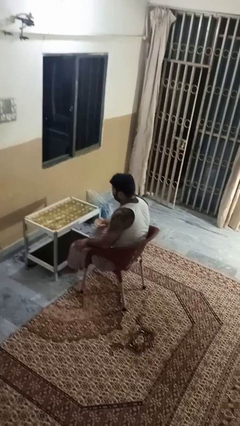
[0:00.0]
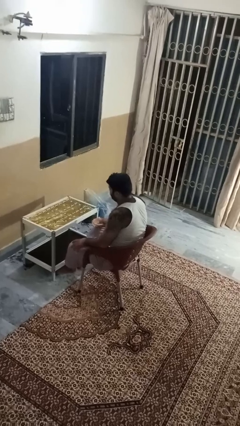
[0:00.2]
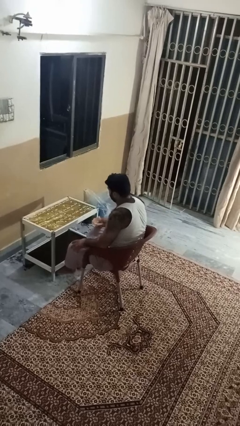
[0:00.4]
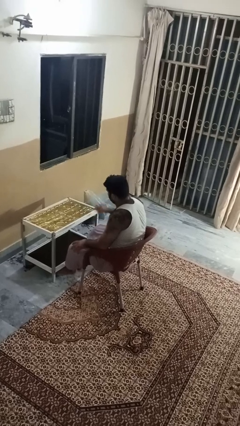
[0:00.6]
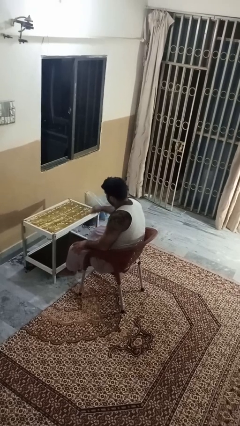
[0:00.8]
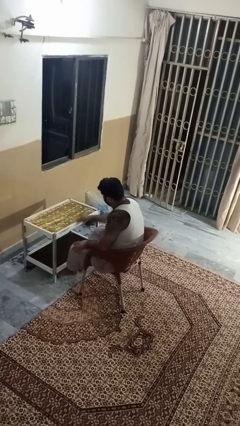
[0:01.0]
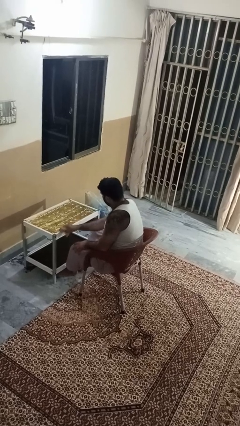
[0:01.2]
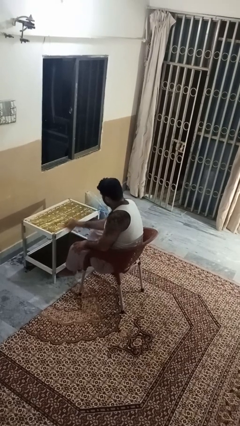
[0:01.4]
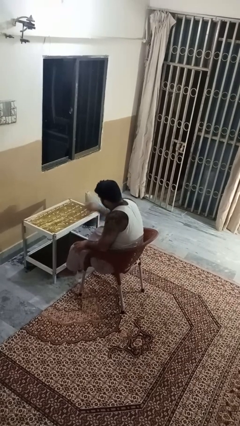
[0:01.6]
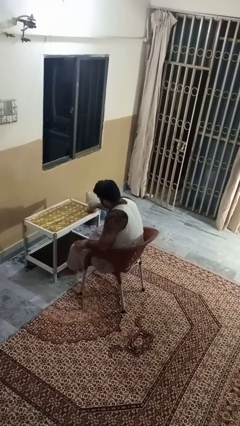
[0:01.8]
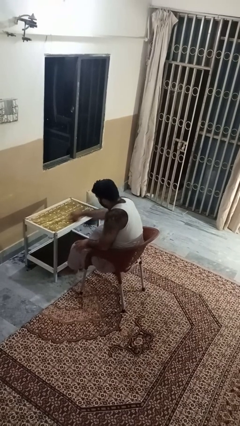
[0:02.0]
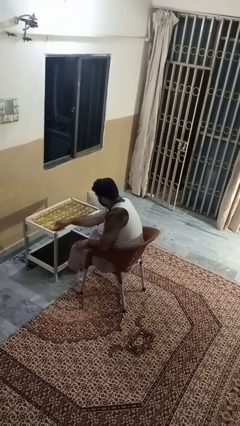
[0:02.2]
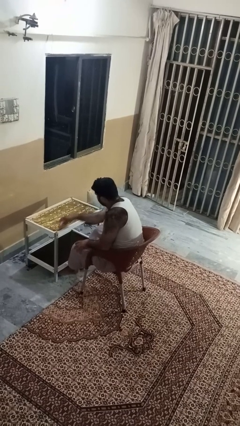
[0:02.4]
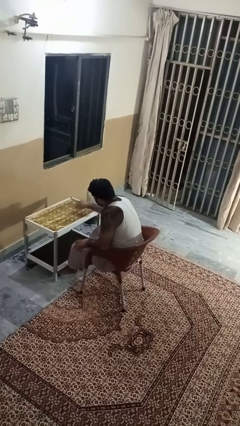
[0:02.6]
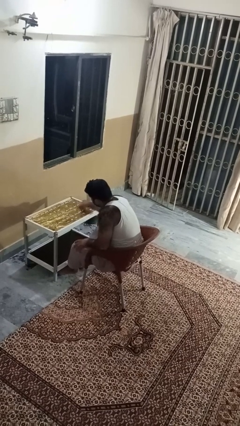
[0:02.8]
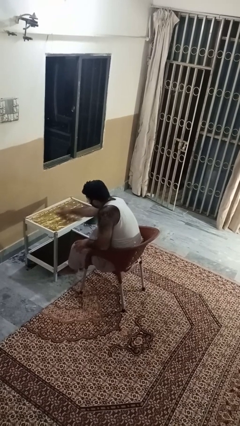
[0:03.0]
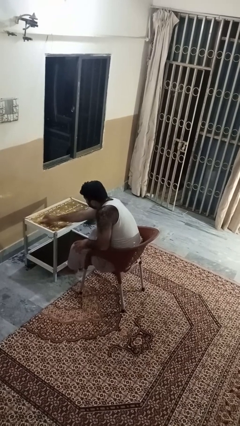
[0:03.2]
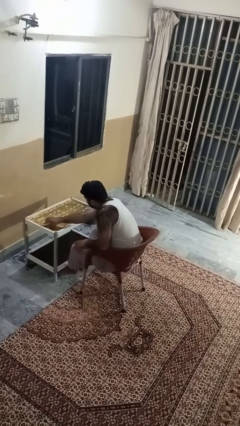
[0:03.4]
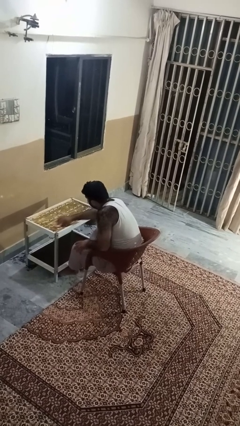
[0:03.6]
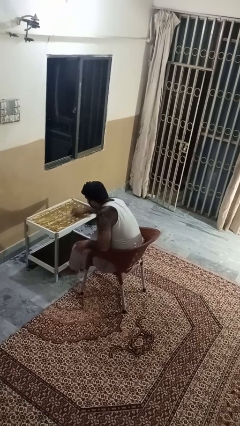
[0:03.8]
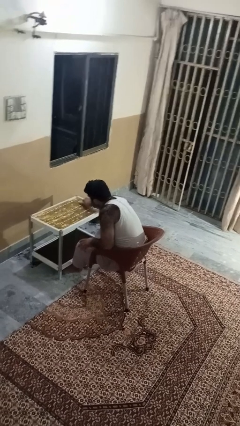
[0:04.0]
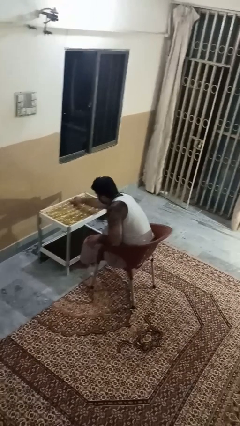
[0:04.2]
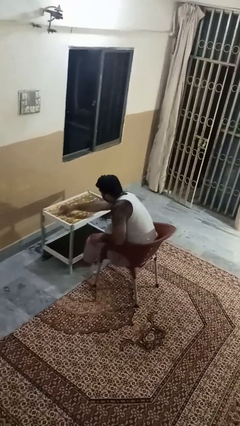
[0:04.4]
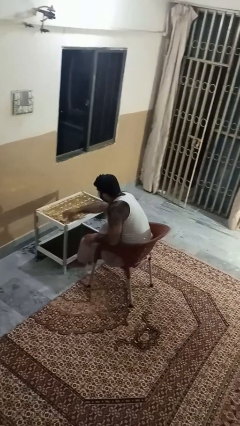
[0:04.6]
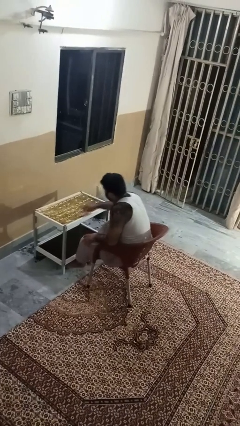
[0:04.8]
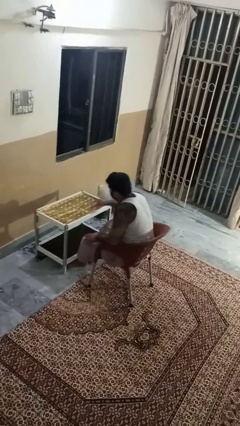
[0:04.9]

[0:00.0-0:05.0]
person cleans table with rag

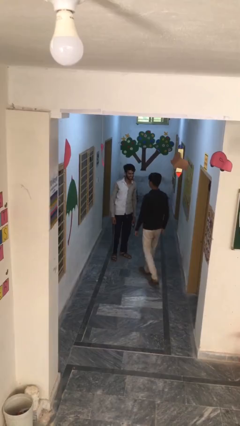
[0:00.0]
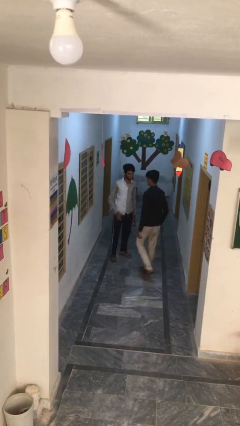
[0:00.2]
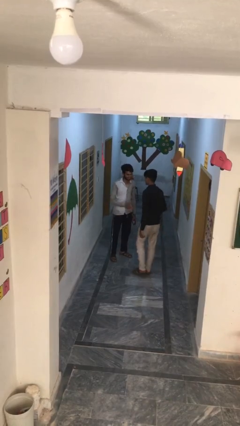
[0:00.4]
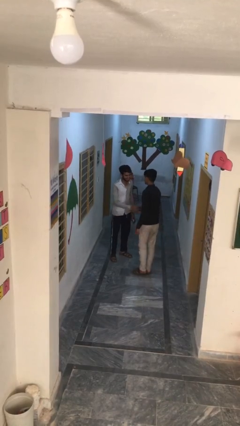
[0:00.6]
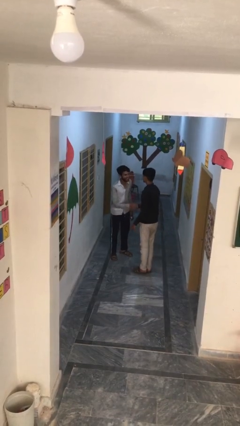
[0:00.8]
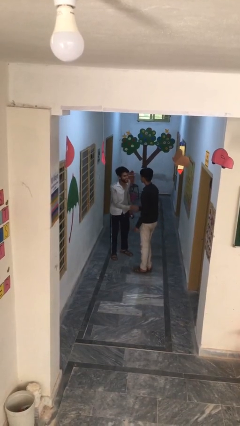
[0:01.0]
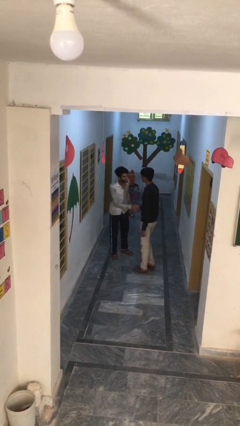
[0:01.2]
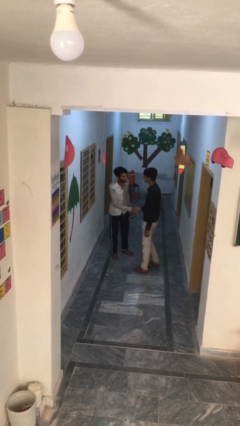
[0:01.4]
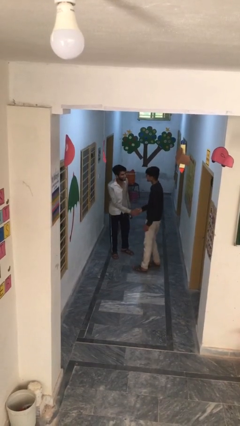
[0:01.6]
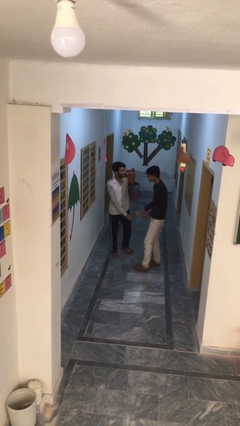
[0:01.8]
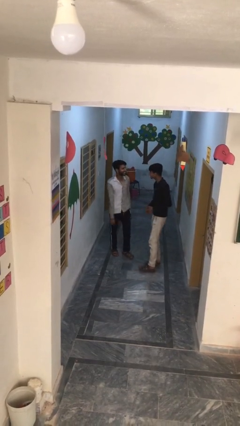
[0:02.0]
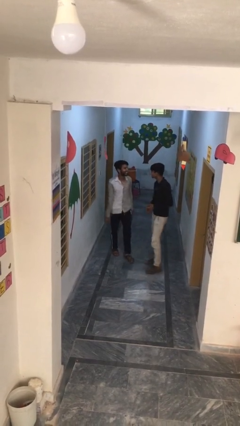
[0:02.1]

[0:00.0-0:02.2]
person shakes hand

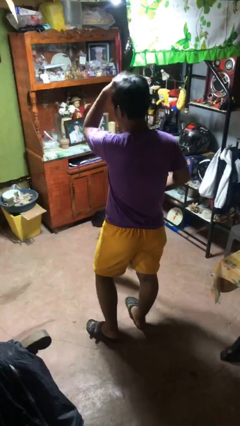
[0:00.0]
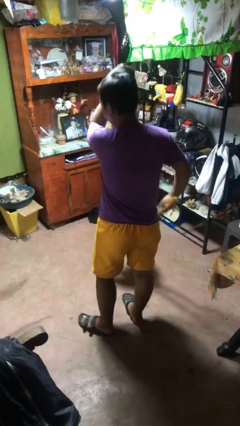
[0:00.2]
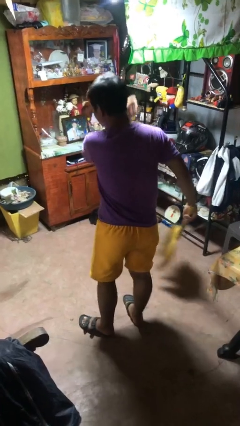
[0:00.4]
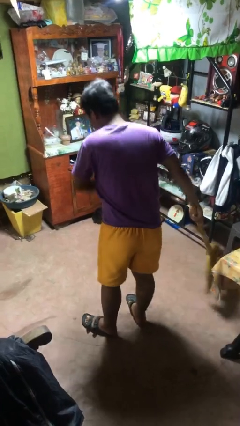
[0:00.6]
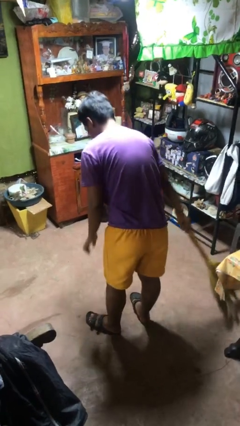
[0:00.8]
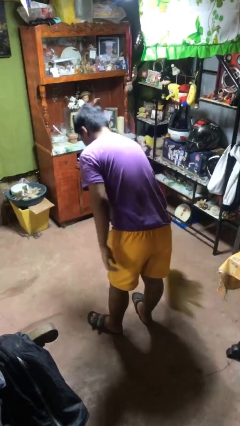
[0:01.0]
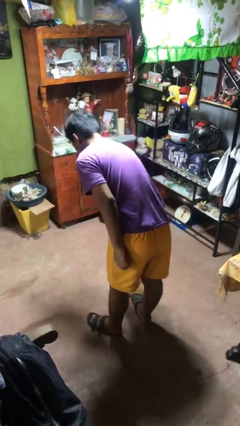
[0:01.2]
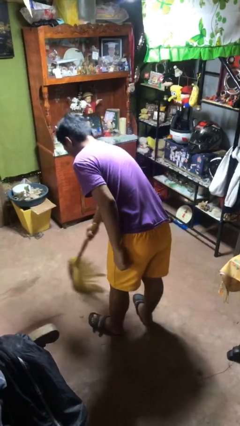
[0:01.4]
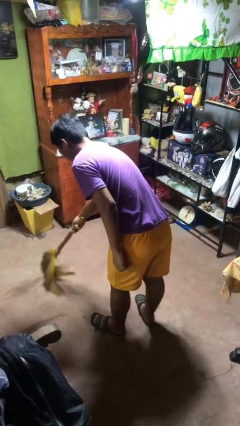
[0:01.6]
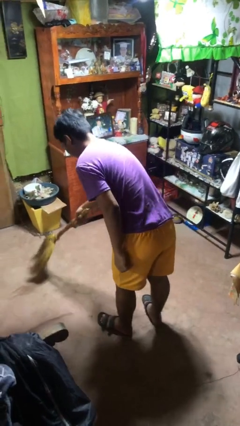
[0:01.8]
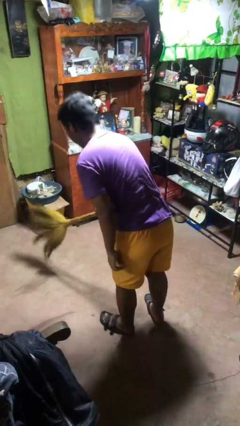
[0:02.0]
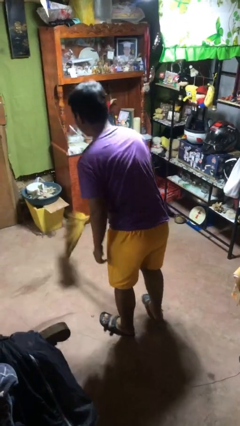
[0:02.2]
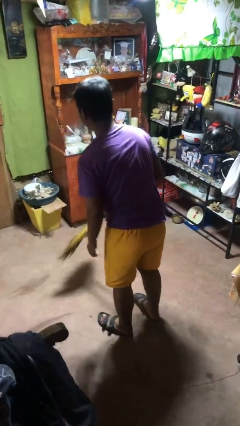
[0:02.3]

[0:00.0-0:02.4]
person sweeps floor

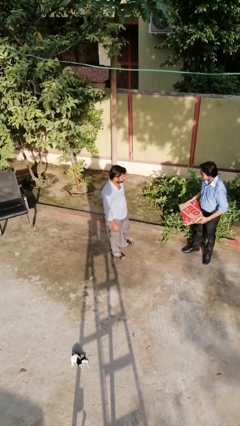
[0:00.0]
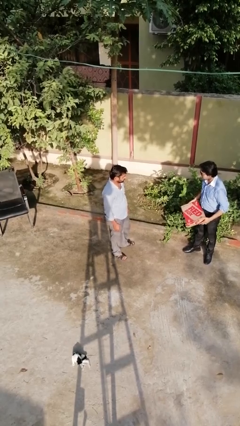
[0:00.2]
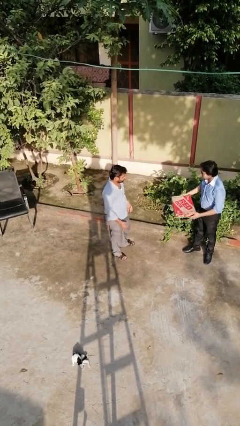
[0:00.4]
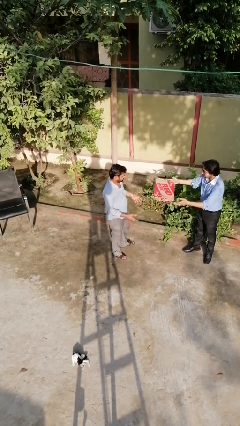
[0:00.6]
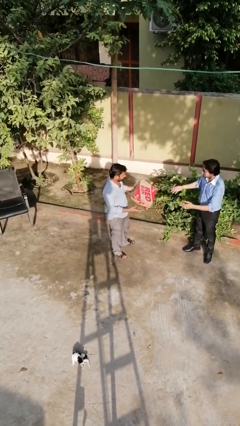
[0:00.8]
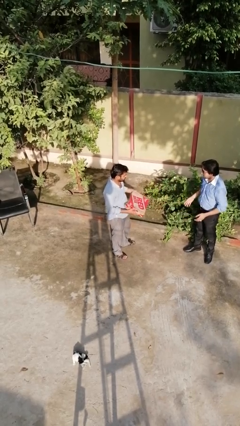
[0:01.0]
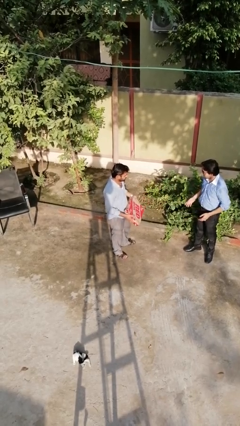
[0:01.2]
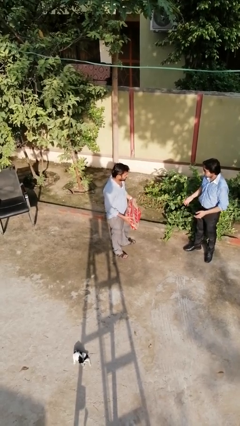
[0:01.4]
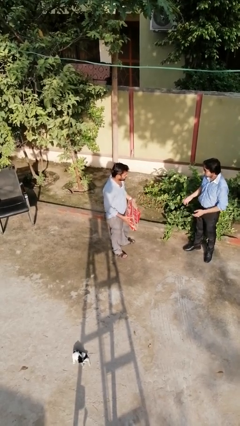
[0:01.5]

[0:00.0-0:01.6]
person catches object from person

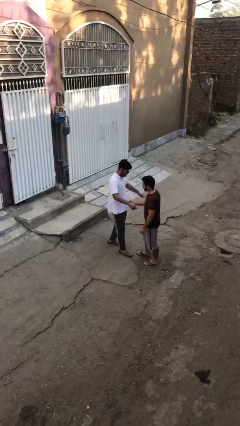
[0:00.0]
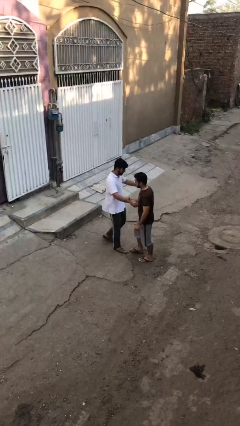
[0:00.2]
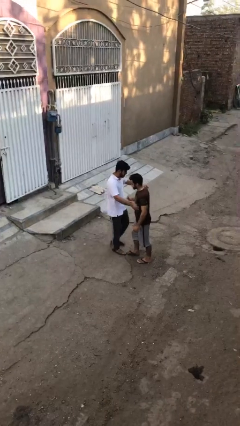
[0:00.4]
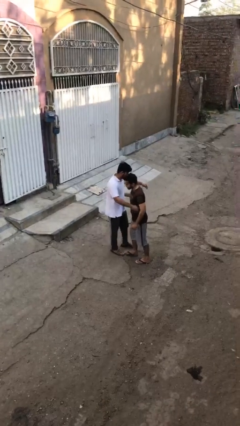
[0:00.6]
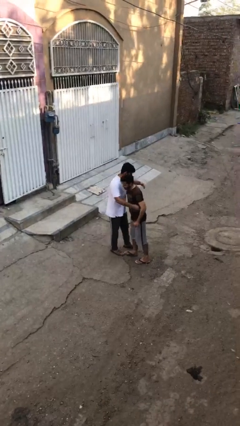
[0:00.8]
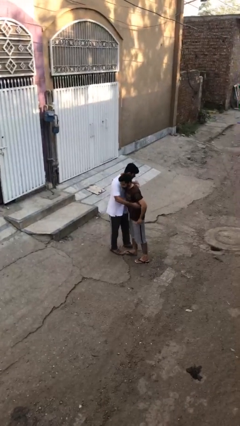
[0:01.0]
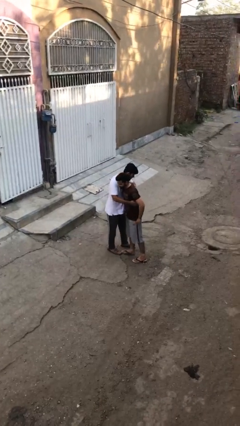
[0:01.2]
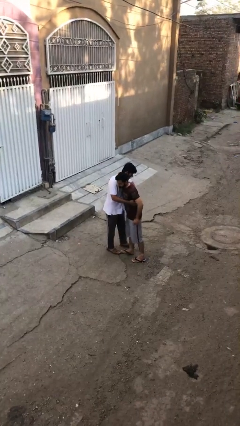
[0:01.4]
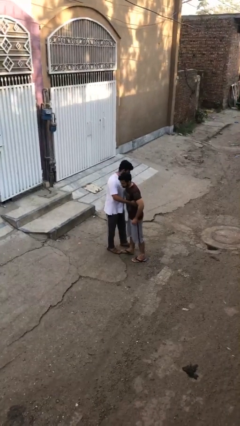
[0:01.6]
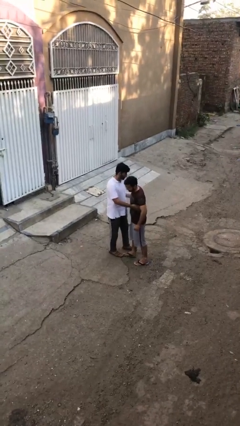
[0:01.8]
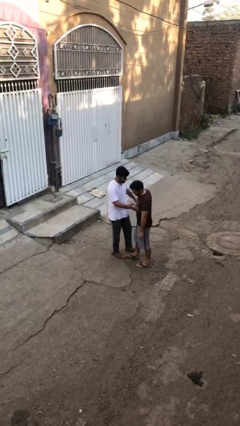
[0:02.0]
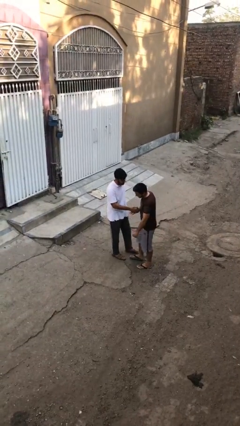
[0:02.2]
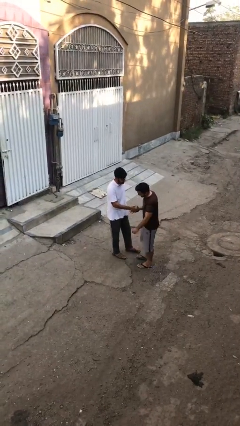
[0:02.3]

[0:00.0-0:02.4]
person embraces person

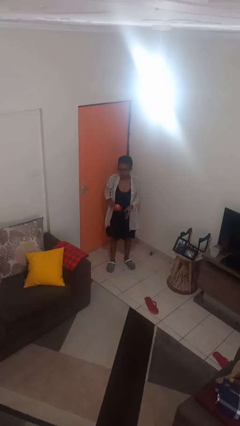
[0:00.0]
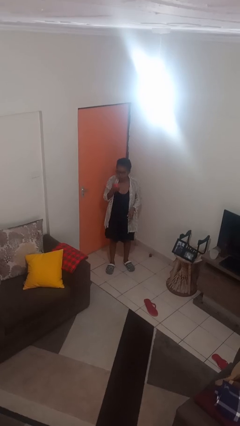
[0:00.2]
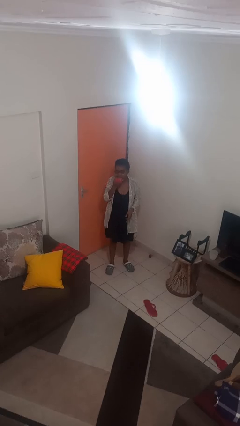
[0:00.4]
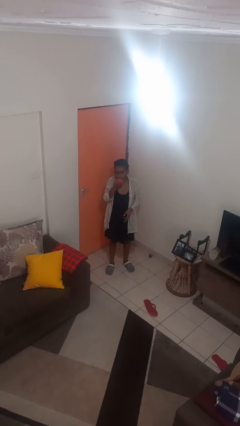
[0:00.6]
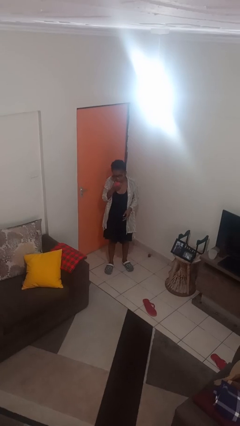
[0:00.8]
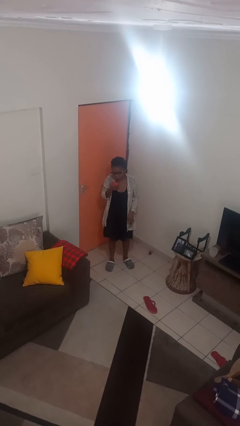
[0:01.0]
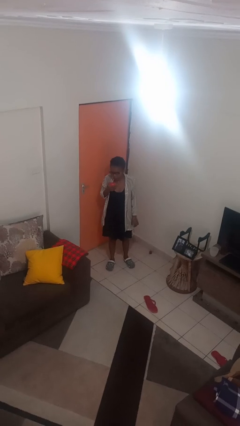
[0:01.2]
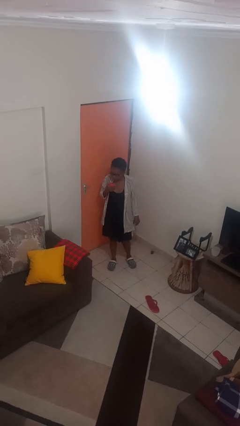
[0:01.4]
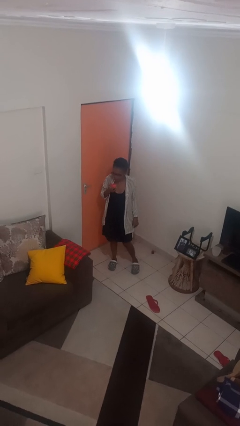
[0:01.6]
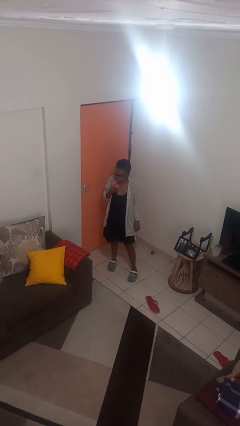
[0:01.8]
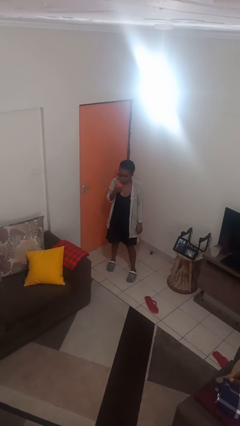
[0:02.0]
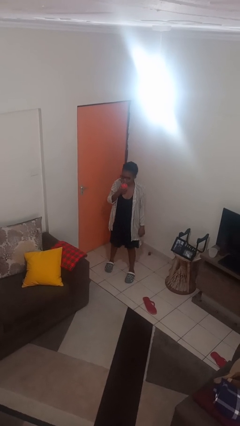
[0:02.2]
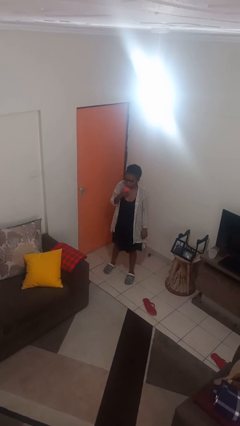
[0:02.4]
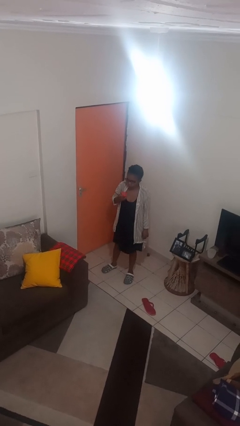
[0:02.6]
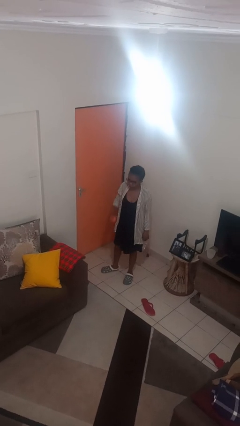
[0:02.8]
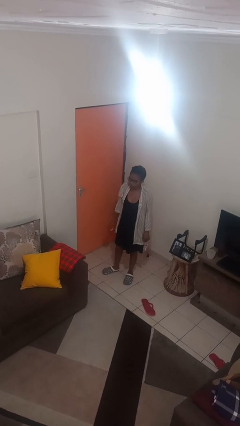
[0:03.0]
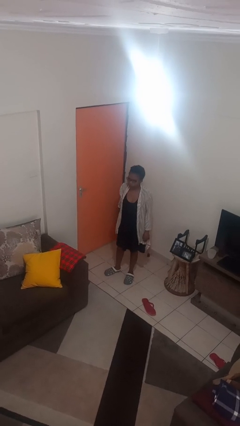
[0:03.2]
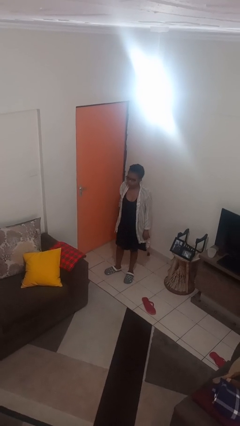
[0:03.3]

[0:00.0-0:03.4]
person eats apple
